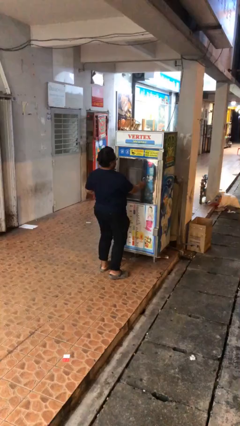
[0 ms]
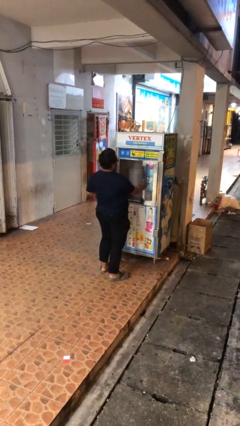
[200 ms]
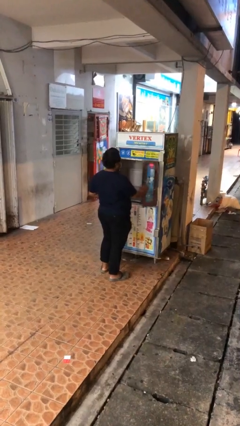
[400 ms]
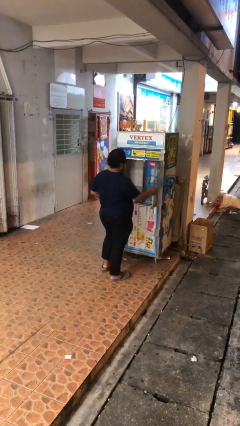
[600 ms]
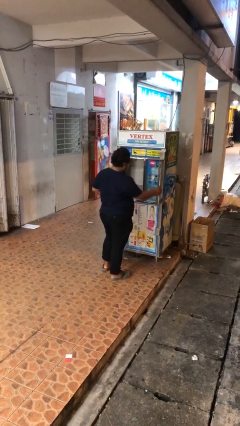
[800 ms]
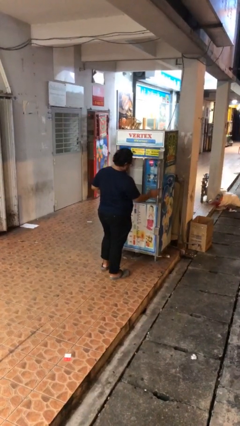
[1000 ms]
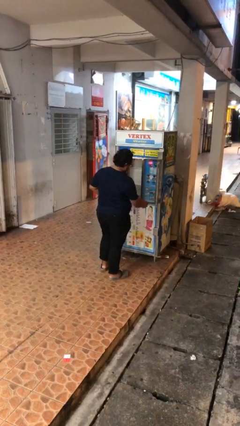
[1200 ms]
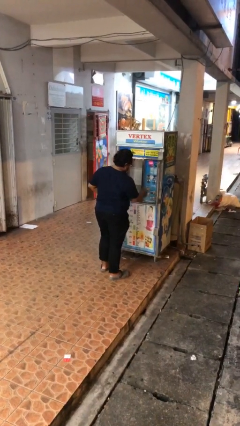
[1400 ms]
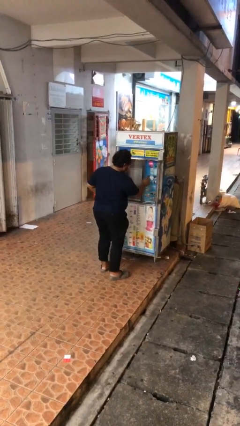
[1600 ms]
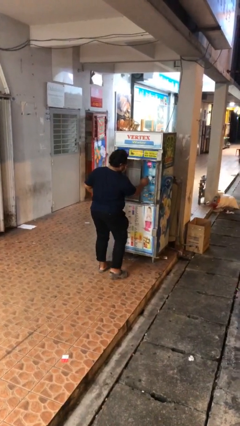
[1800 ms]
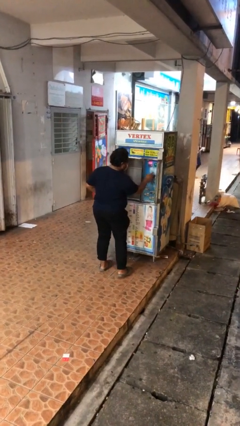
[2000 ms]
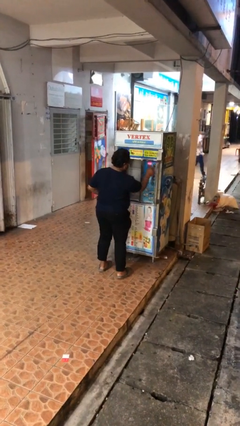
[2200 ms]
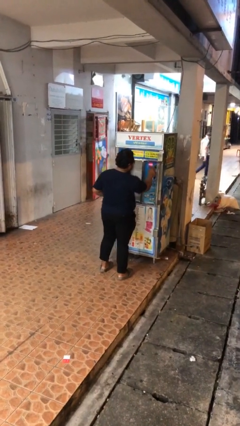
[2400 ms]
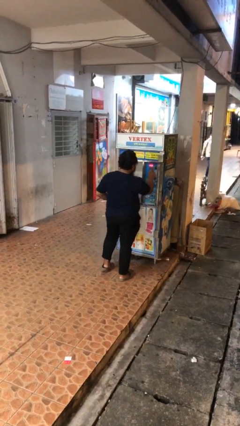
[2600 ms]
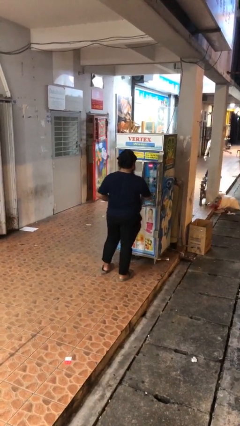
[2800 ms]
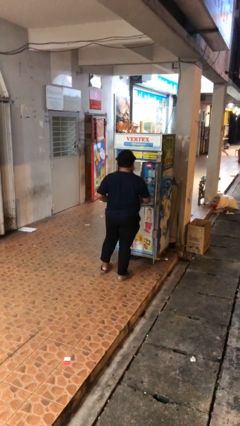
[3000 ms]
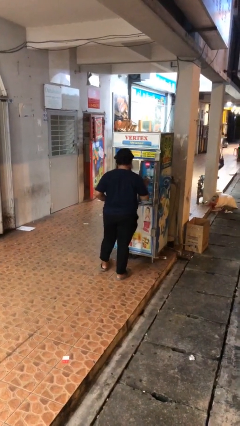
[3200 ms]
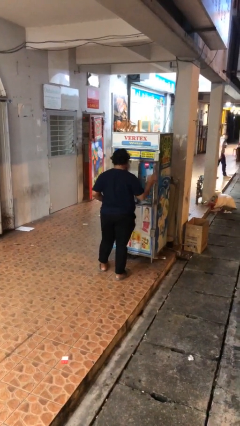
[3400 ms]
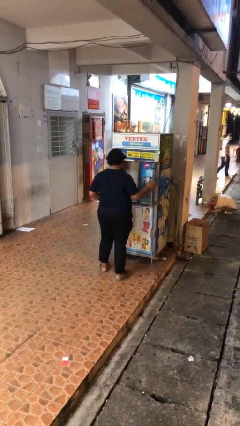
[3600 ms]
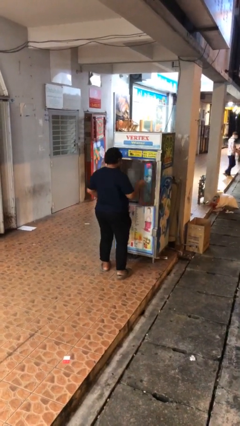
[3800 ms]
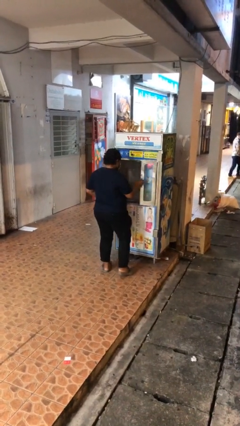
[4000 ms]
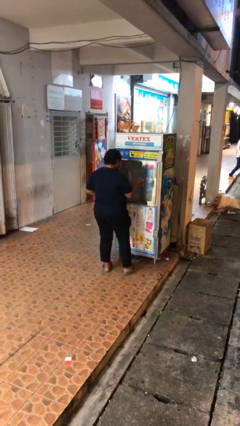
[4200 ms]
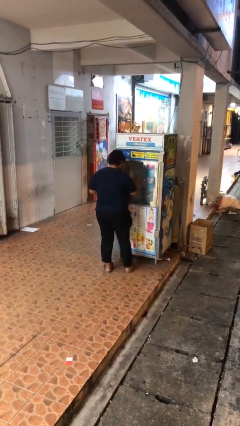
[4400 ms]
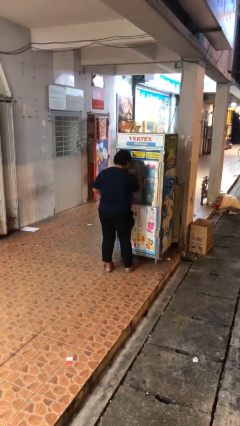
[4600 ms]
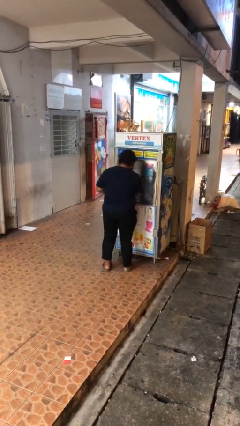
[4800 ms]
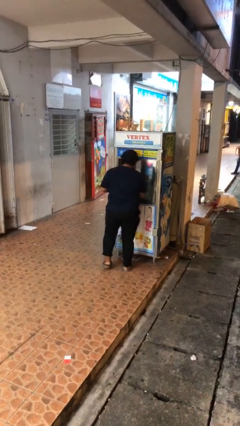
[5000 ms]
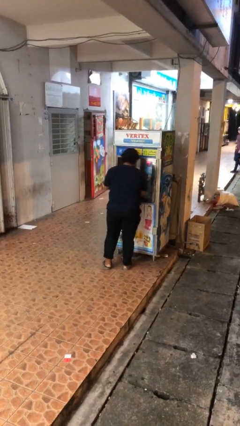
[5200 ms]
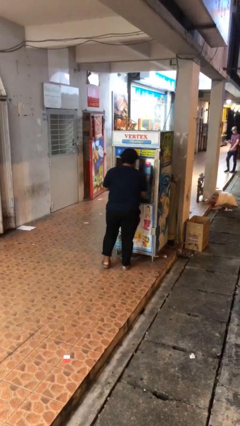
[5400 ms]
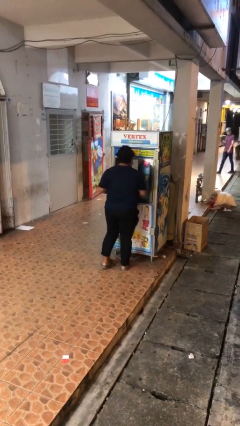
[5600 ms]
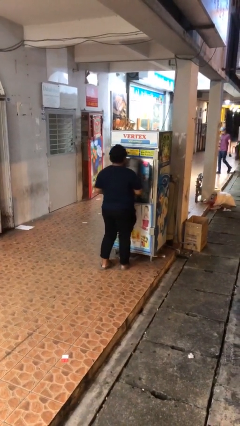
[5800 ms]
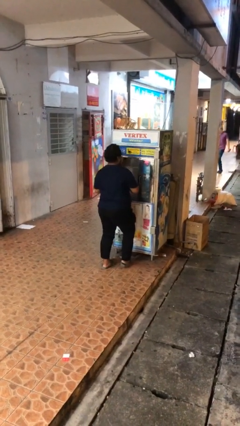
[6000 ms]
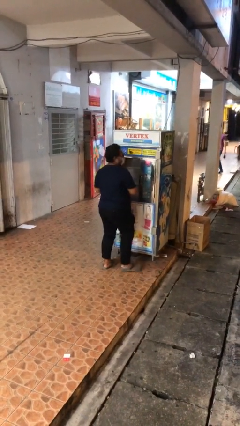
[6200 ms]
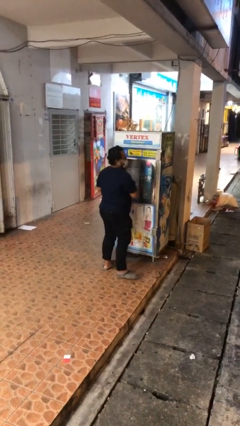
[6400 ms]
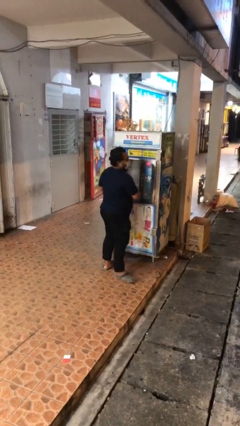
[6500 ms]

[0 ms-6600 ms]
person purchases from machine

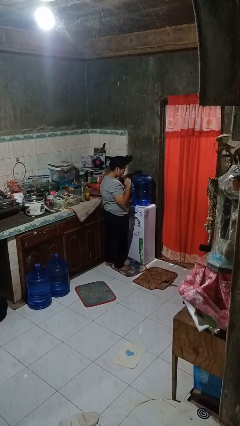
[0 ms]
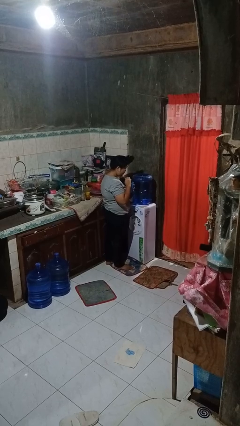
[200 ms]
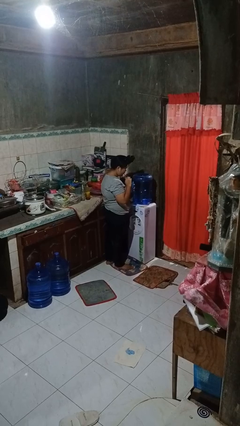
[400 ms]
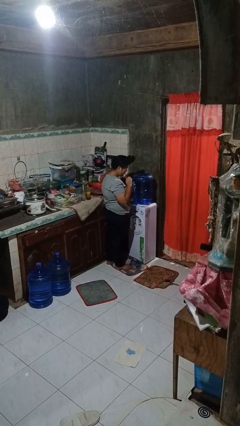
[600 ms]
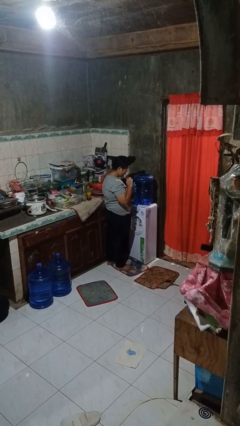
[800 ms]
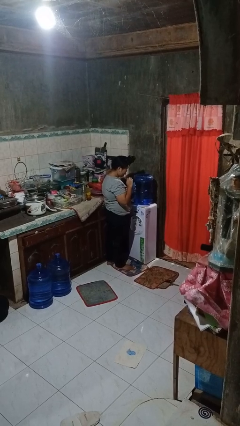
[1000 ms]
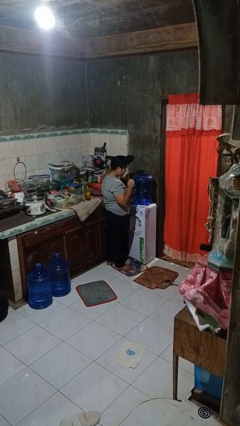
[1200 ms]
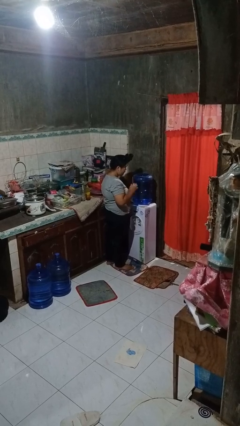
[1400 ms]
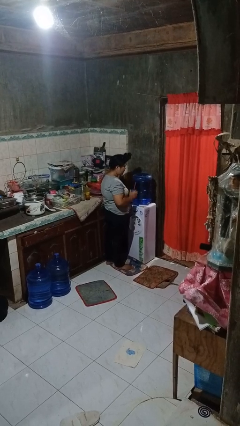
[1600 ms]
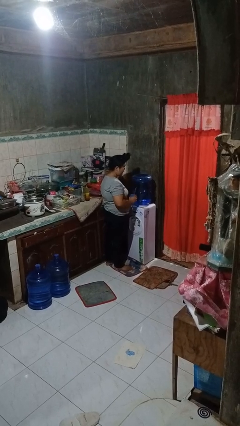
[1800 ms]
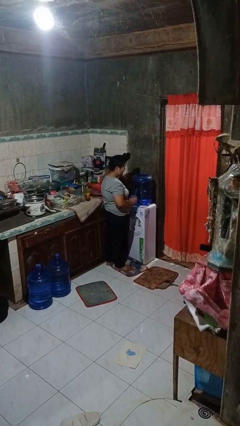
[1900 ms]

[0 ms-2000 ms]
person drinks from straw

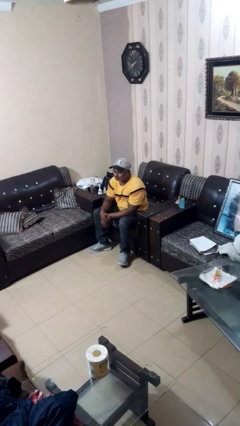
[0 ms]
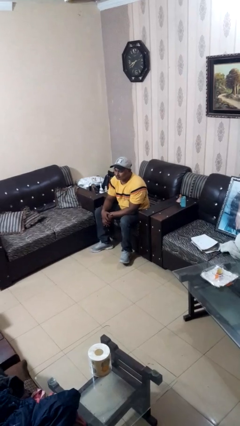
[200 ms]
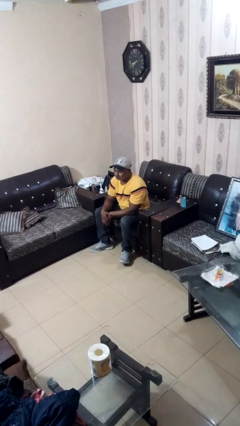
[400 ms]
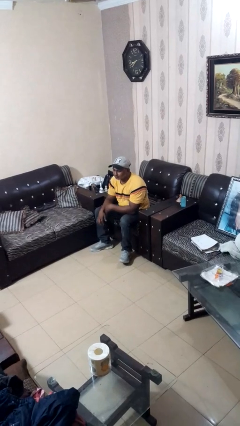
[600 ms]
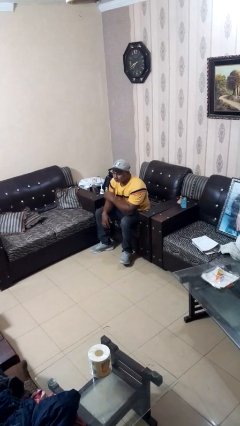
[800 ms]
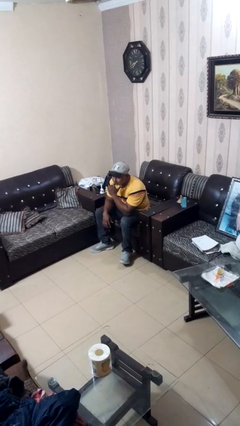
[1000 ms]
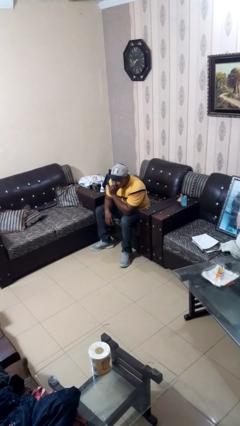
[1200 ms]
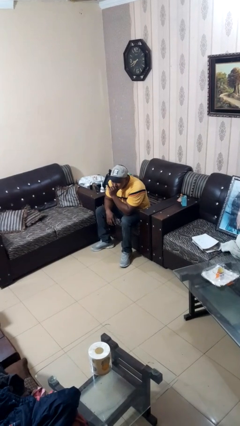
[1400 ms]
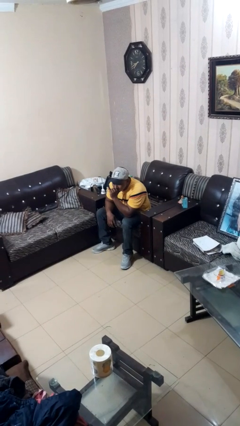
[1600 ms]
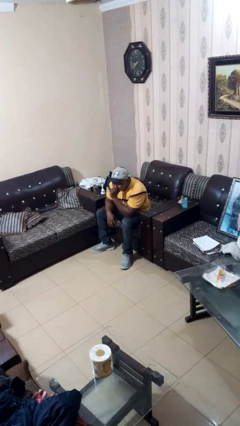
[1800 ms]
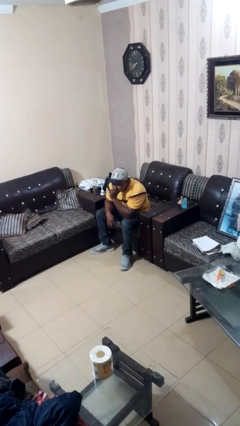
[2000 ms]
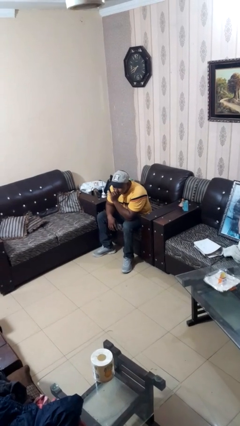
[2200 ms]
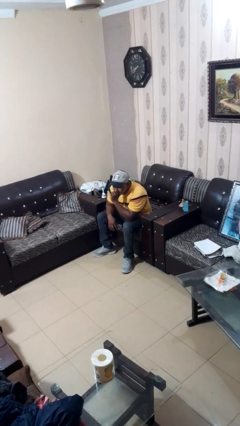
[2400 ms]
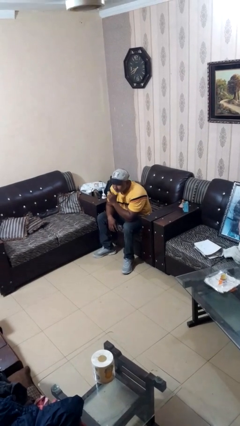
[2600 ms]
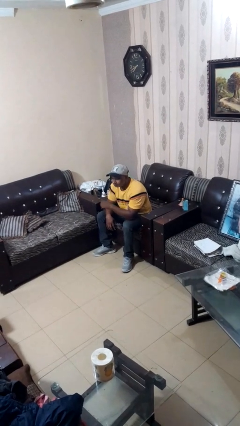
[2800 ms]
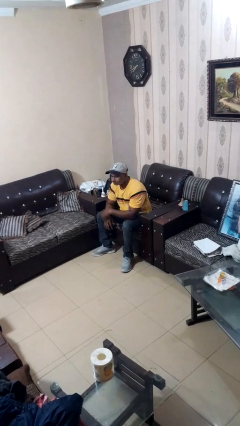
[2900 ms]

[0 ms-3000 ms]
person strokes chin

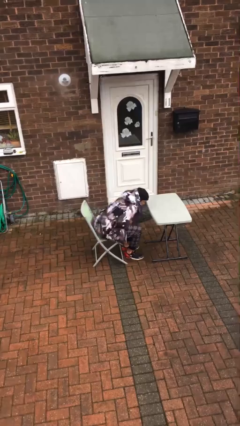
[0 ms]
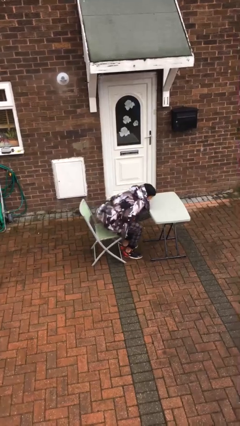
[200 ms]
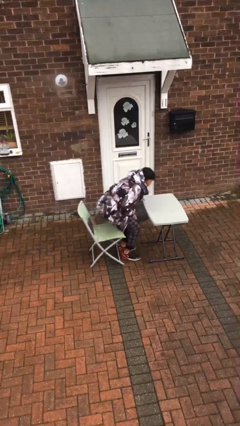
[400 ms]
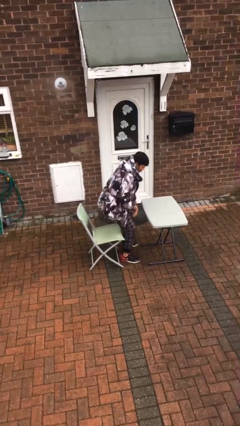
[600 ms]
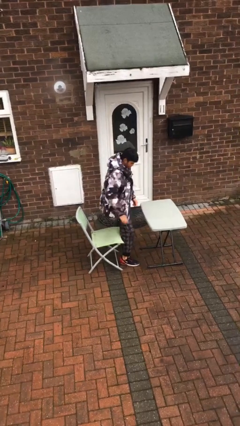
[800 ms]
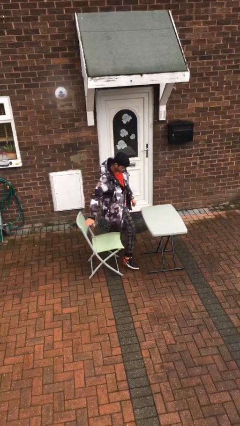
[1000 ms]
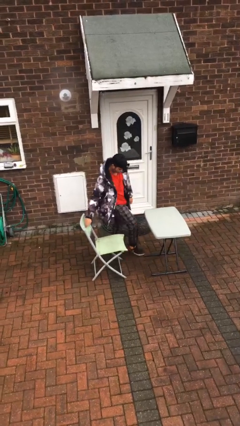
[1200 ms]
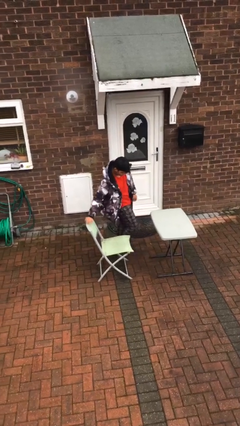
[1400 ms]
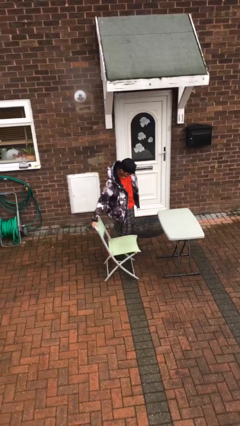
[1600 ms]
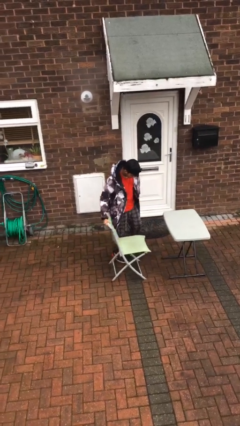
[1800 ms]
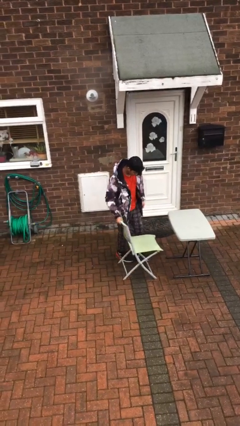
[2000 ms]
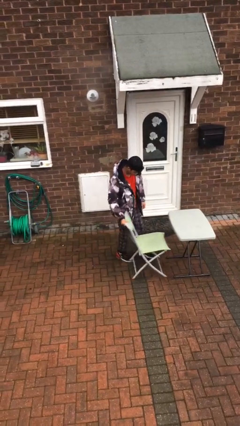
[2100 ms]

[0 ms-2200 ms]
person stands up

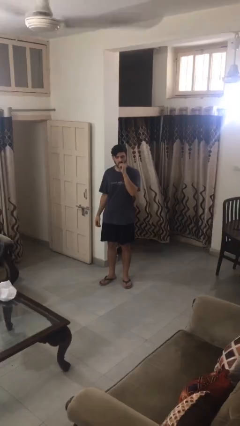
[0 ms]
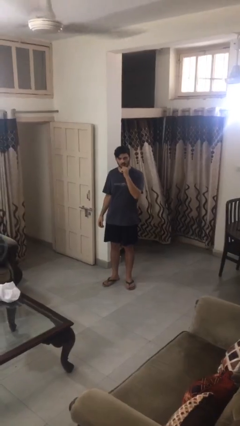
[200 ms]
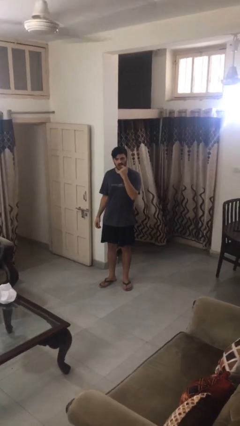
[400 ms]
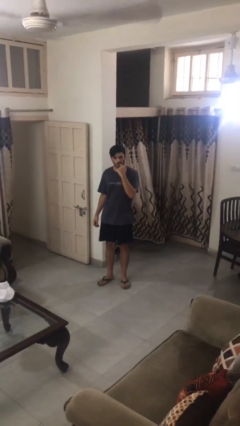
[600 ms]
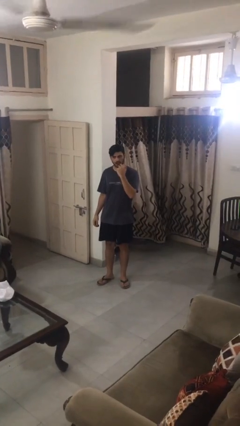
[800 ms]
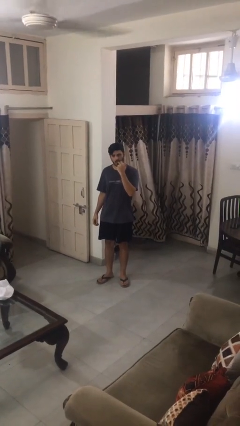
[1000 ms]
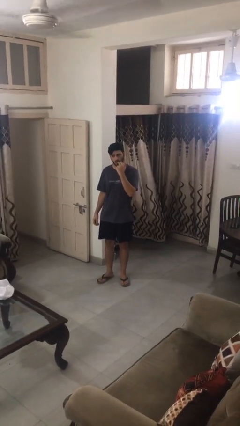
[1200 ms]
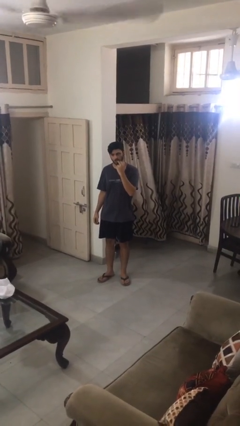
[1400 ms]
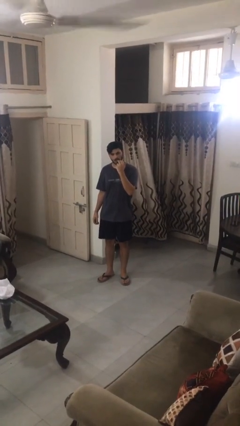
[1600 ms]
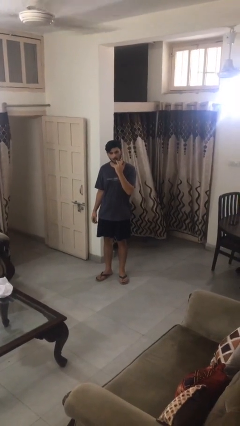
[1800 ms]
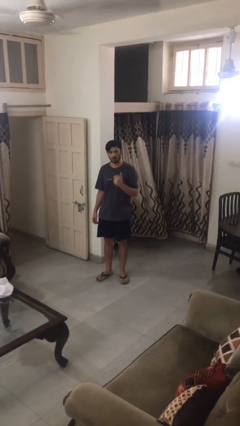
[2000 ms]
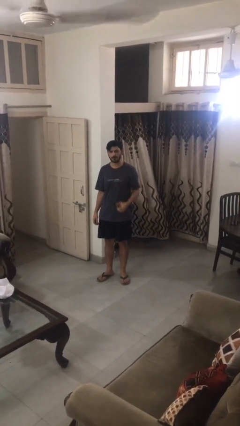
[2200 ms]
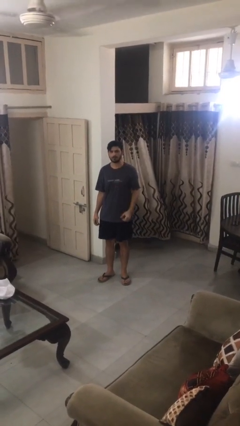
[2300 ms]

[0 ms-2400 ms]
person licks fingers

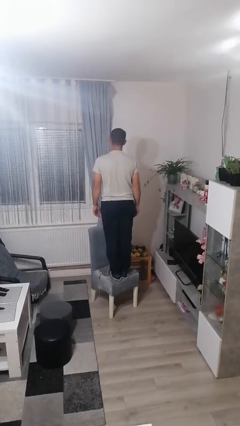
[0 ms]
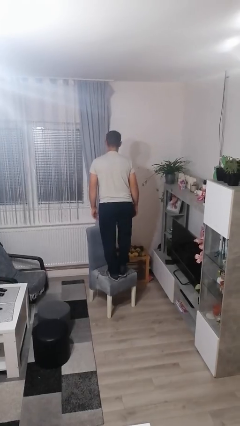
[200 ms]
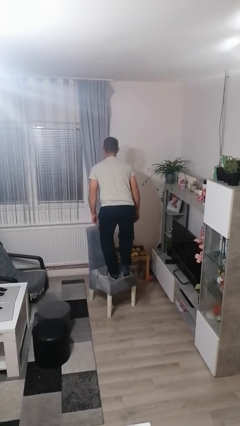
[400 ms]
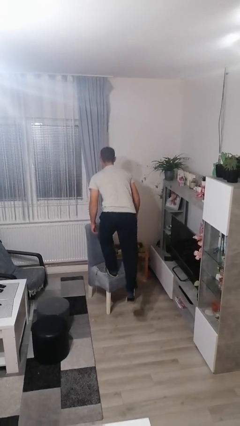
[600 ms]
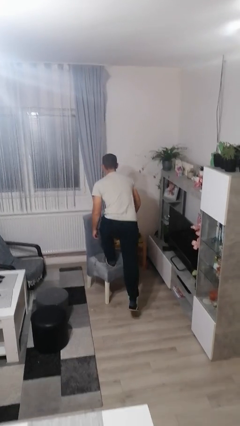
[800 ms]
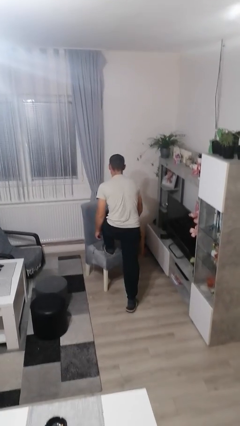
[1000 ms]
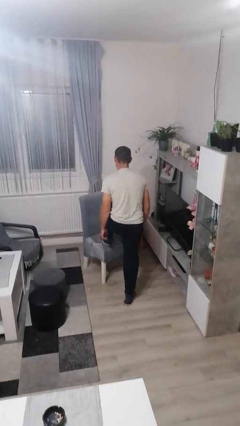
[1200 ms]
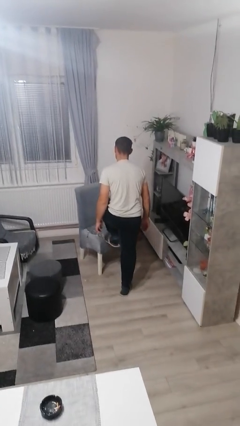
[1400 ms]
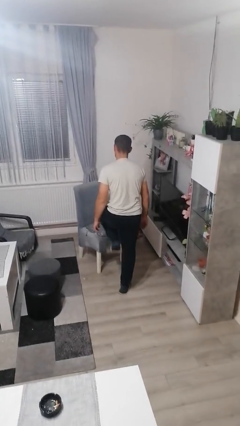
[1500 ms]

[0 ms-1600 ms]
person climbs off chair
